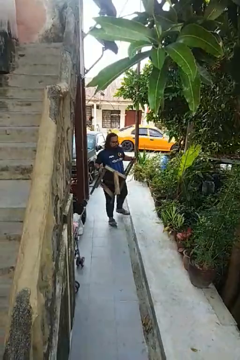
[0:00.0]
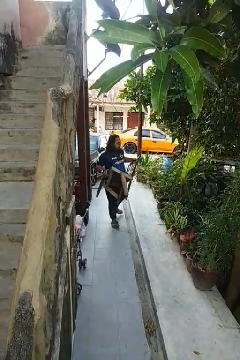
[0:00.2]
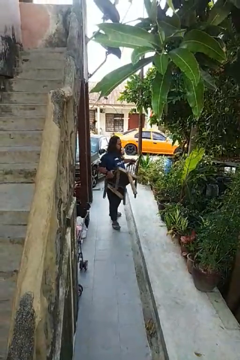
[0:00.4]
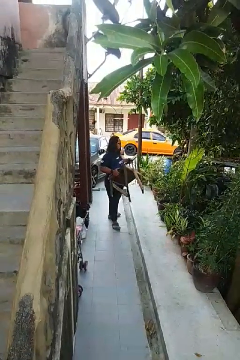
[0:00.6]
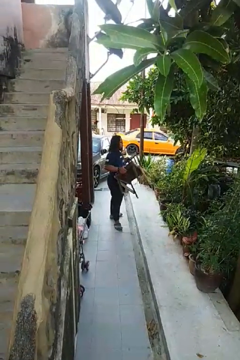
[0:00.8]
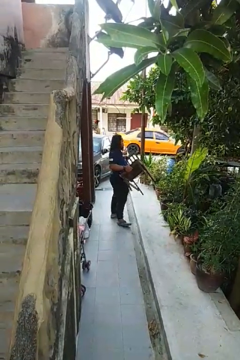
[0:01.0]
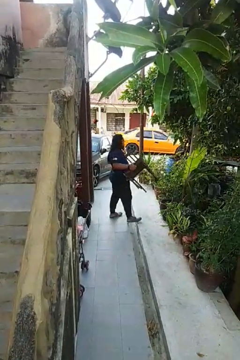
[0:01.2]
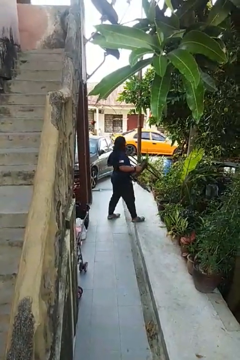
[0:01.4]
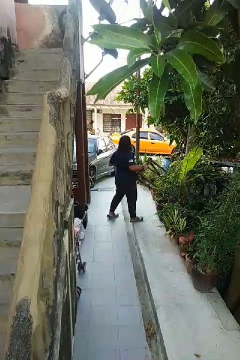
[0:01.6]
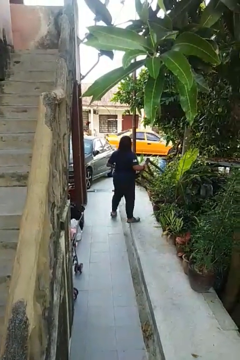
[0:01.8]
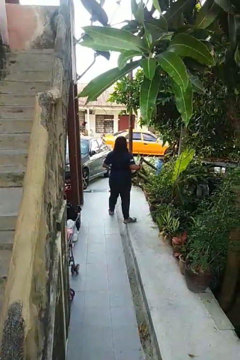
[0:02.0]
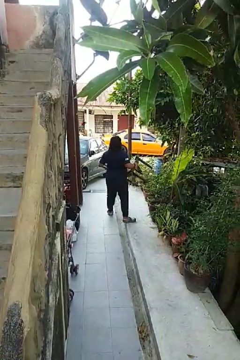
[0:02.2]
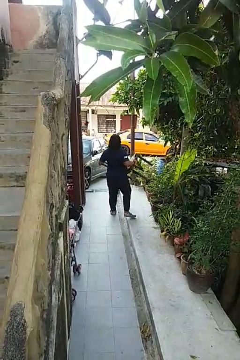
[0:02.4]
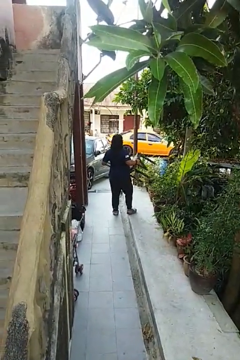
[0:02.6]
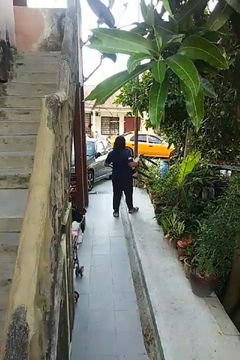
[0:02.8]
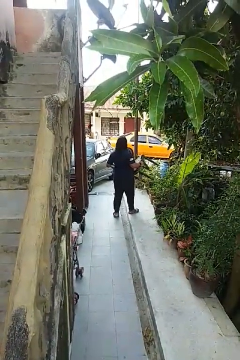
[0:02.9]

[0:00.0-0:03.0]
person carries furniture

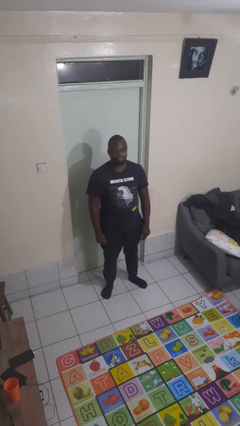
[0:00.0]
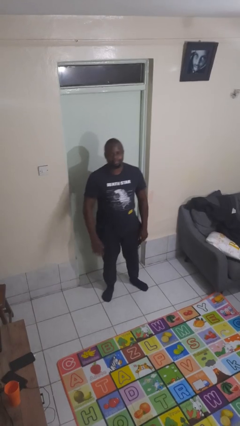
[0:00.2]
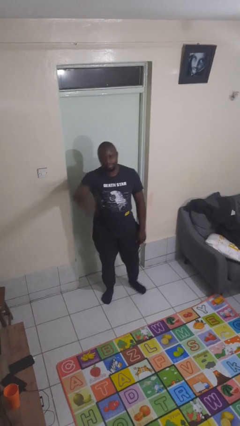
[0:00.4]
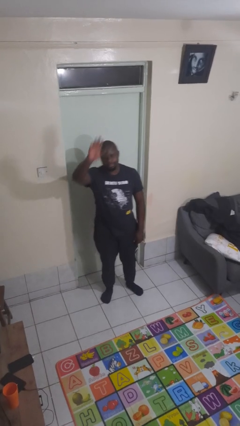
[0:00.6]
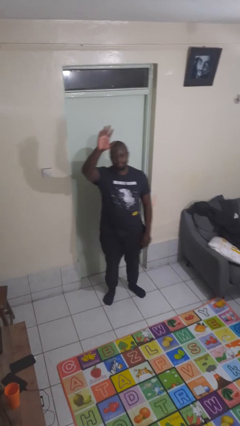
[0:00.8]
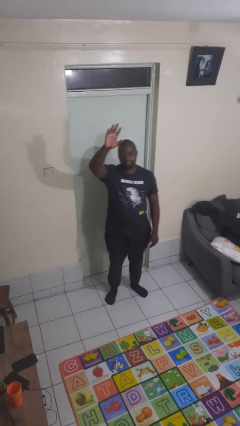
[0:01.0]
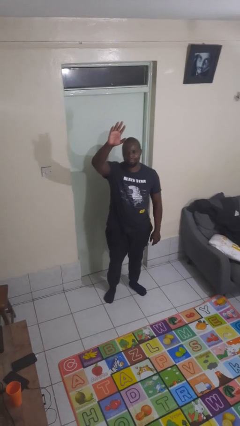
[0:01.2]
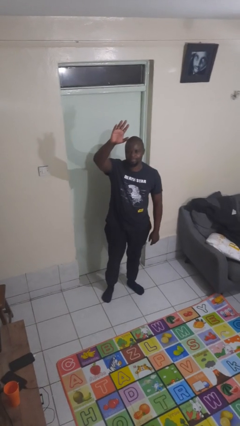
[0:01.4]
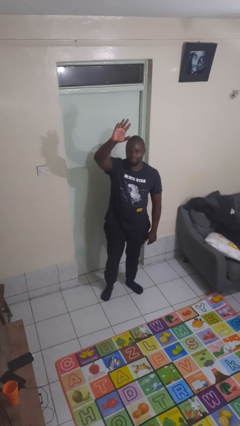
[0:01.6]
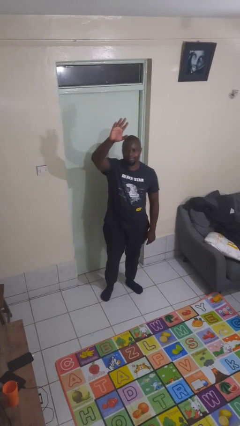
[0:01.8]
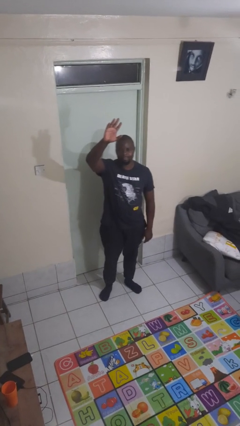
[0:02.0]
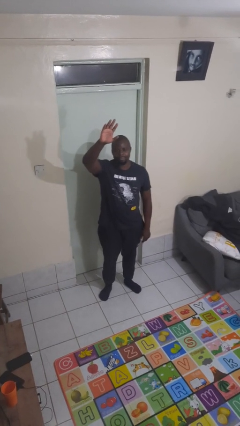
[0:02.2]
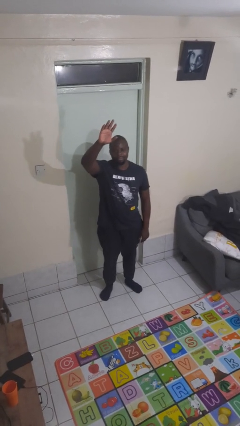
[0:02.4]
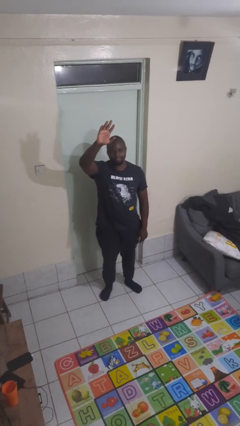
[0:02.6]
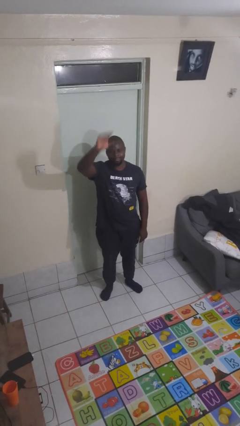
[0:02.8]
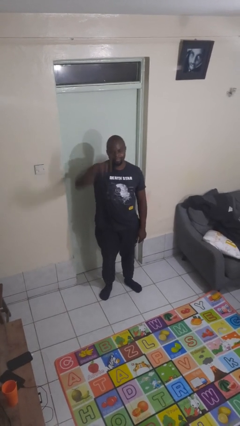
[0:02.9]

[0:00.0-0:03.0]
person gestures raise hand

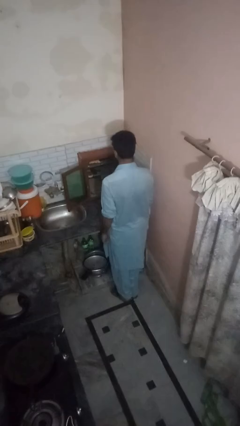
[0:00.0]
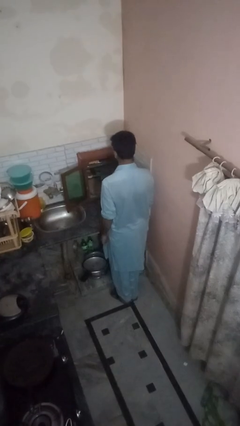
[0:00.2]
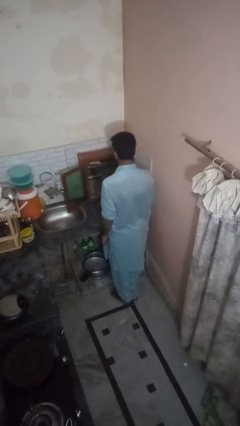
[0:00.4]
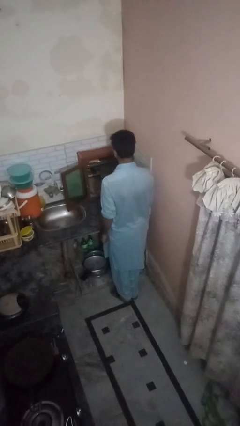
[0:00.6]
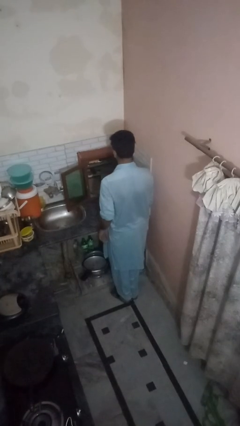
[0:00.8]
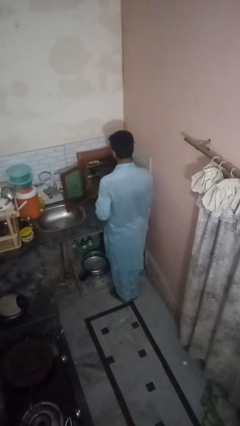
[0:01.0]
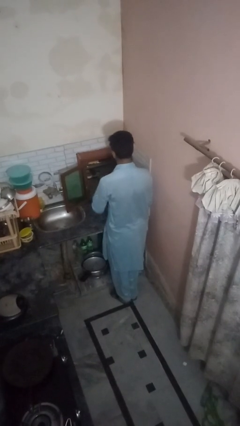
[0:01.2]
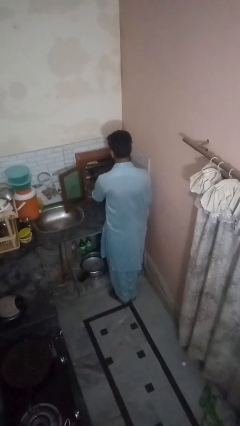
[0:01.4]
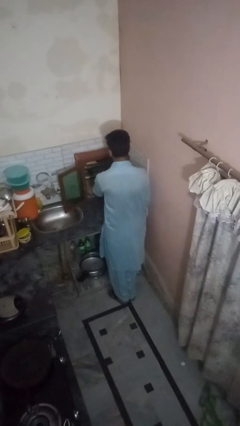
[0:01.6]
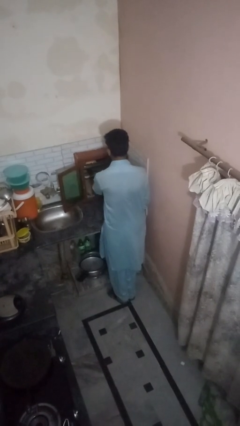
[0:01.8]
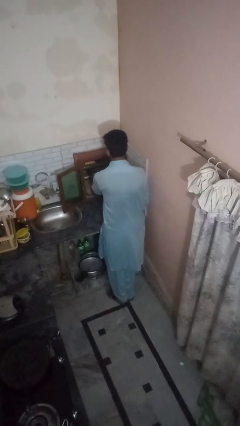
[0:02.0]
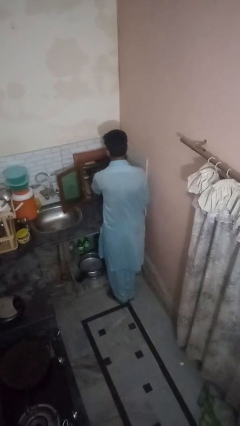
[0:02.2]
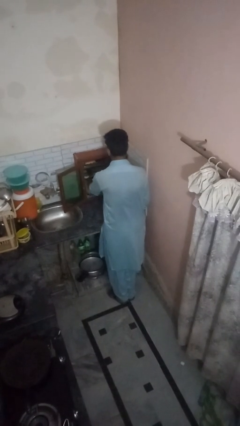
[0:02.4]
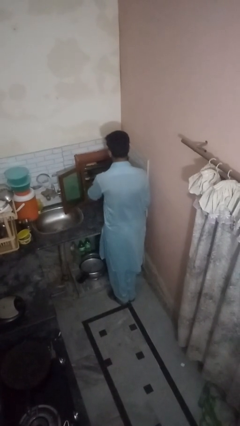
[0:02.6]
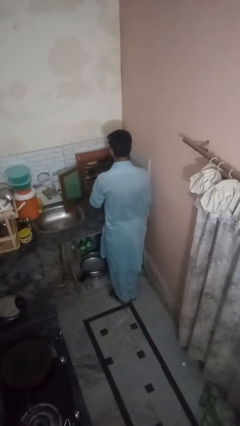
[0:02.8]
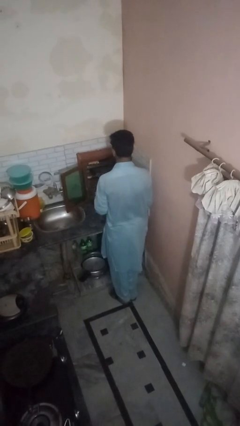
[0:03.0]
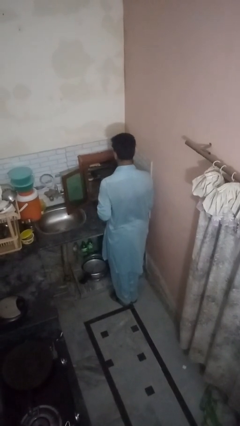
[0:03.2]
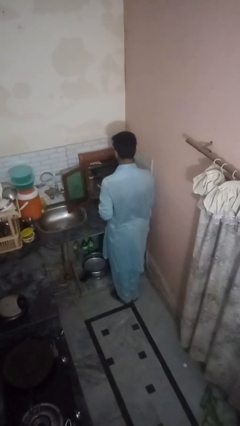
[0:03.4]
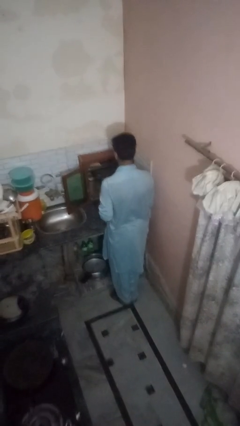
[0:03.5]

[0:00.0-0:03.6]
person takes object from kitchen drawer

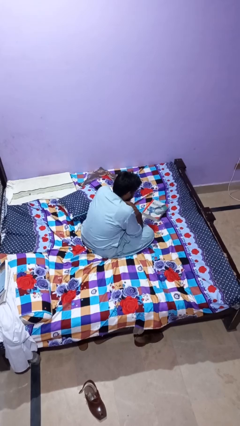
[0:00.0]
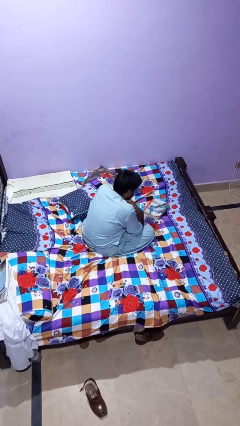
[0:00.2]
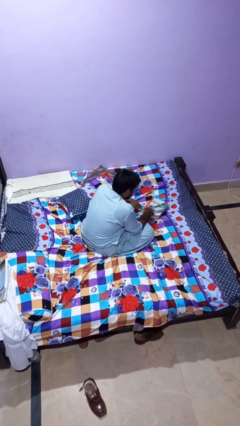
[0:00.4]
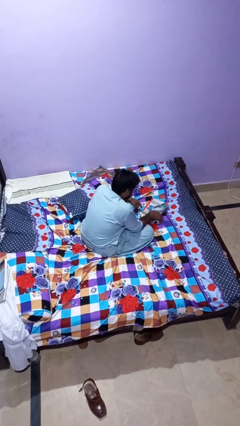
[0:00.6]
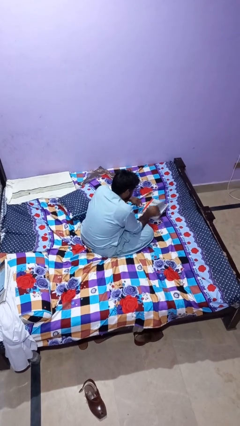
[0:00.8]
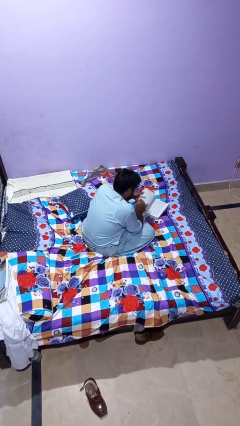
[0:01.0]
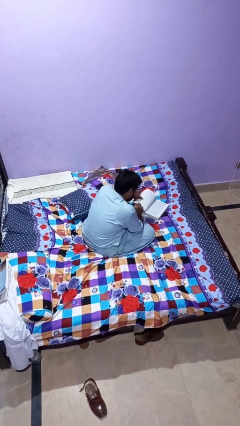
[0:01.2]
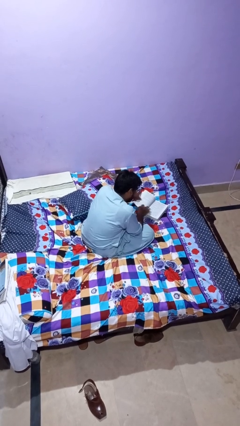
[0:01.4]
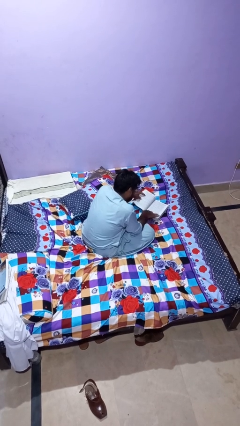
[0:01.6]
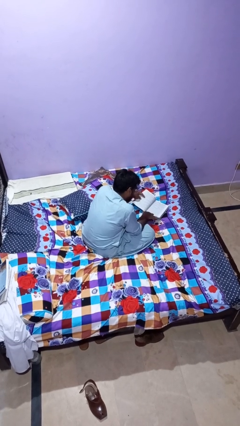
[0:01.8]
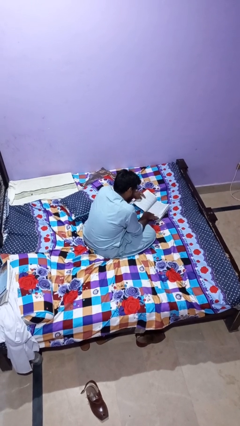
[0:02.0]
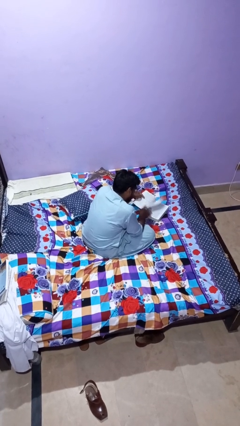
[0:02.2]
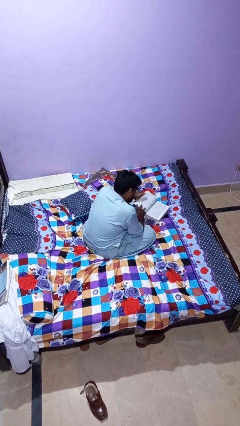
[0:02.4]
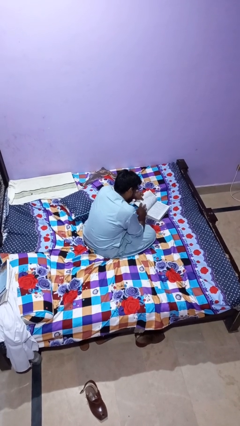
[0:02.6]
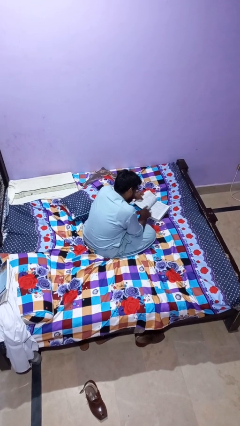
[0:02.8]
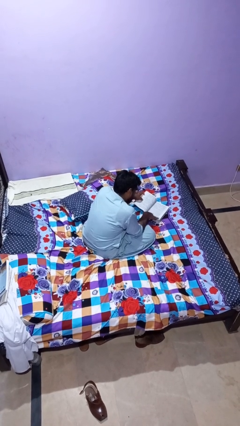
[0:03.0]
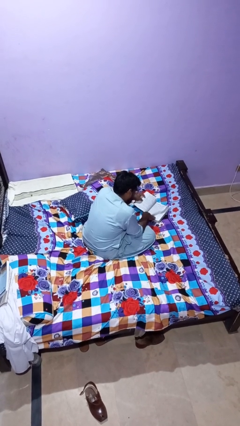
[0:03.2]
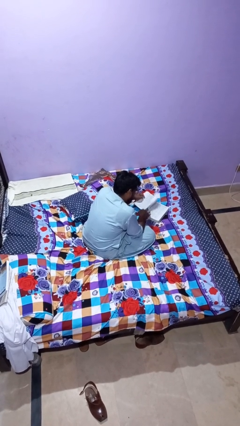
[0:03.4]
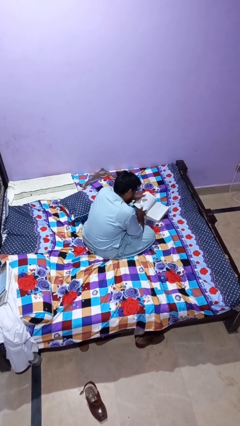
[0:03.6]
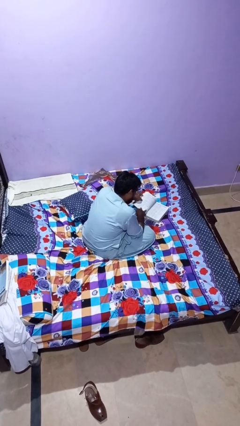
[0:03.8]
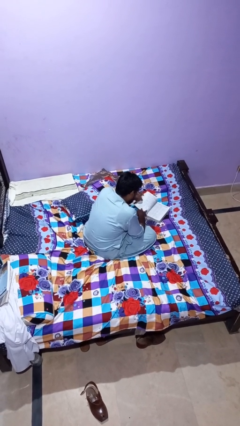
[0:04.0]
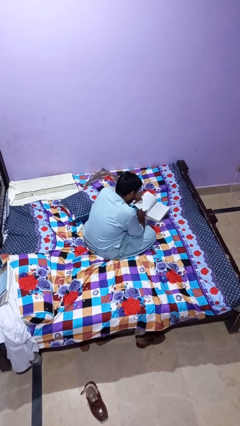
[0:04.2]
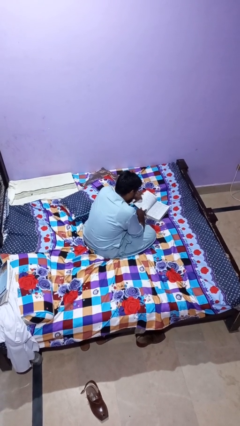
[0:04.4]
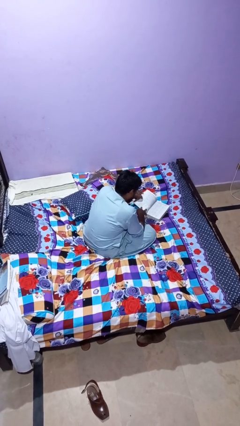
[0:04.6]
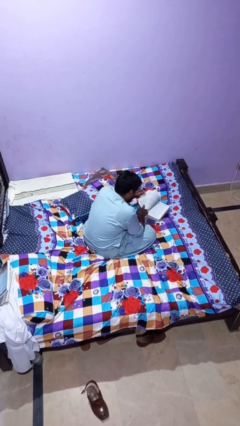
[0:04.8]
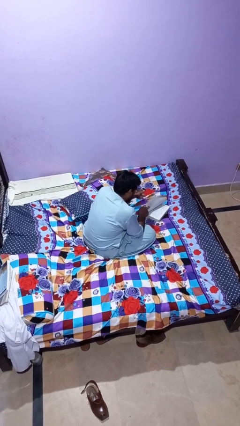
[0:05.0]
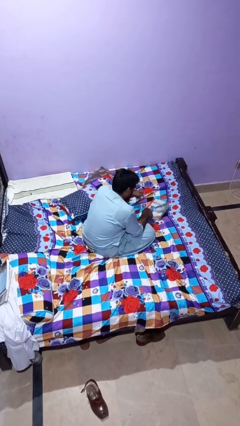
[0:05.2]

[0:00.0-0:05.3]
person reads book

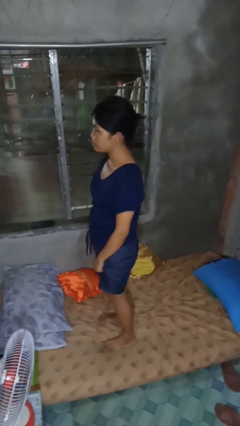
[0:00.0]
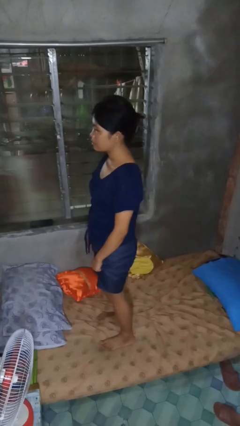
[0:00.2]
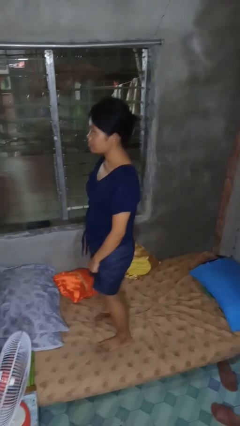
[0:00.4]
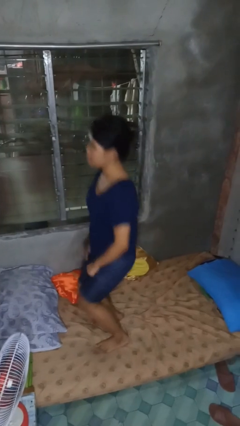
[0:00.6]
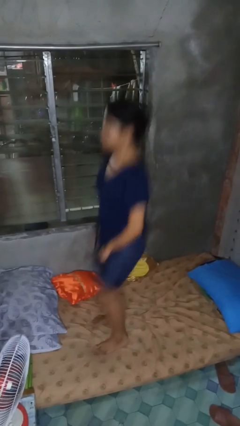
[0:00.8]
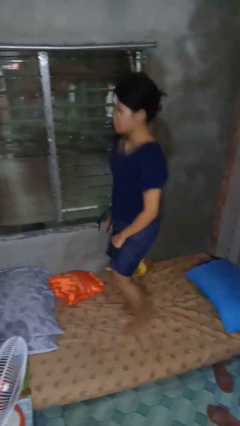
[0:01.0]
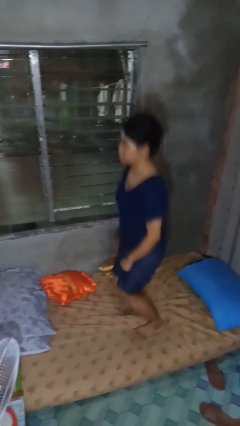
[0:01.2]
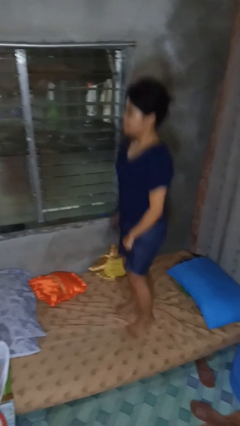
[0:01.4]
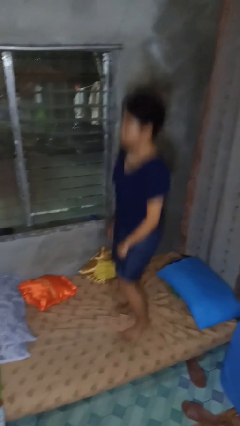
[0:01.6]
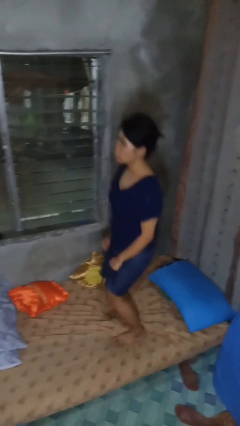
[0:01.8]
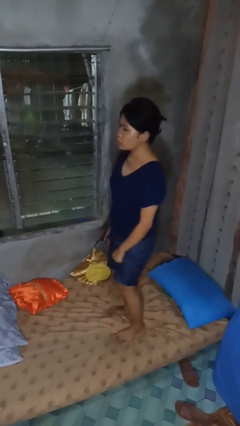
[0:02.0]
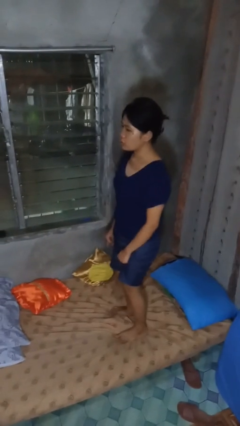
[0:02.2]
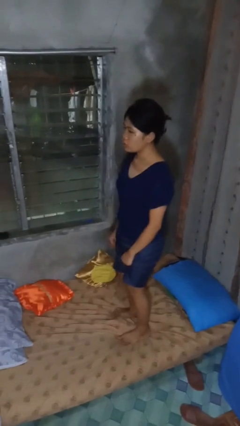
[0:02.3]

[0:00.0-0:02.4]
person jumps on bed

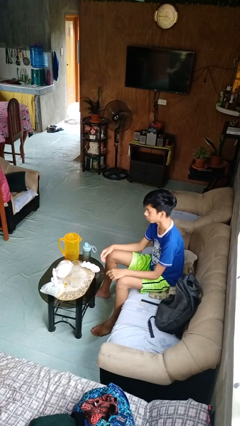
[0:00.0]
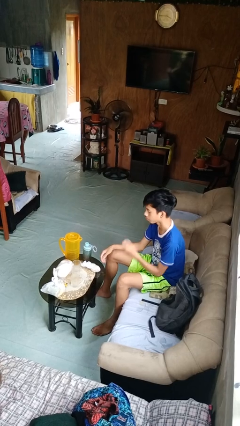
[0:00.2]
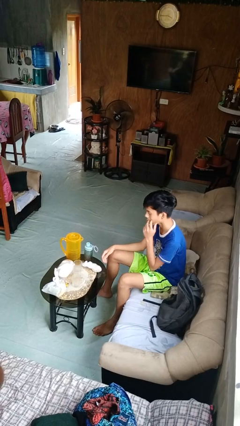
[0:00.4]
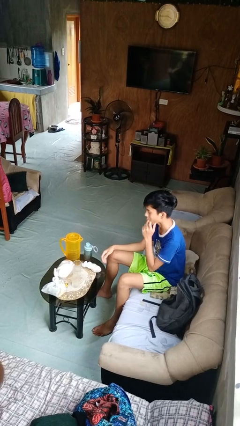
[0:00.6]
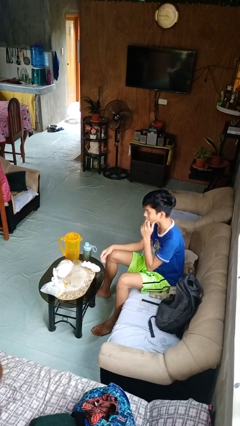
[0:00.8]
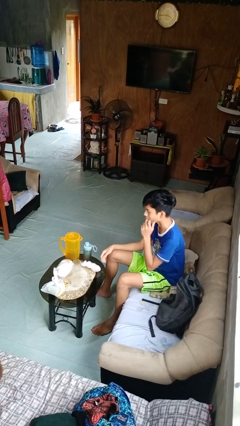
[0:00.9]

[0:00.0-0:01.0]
person licks fingers
